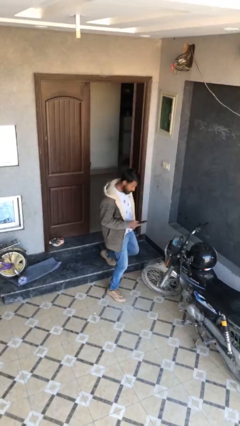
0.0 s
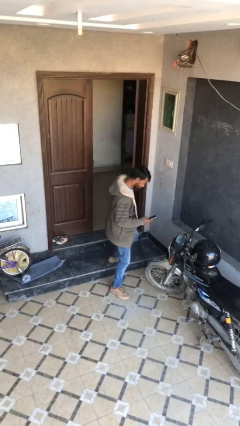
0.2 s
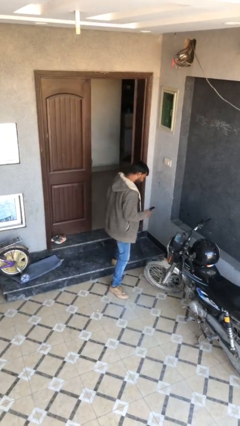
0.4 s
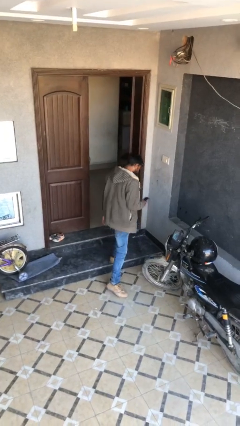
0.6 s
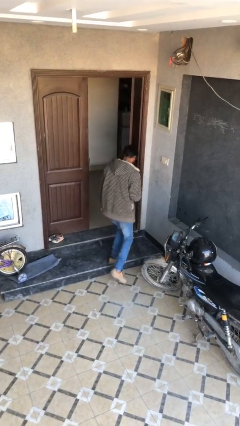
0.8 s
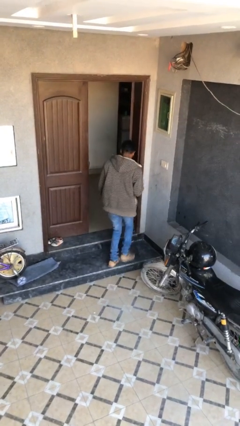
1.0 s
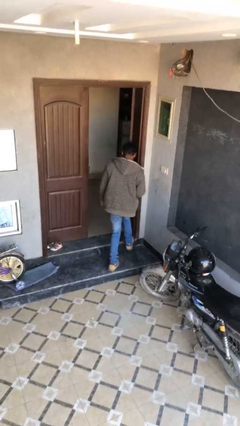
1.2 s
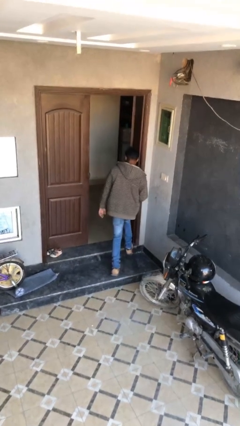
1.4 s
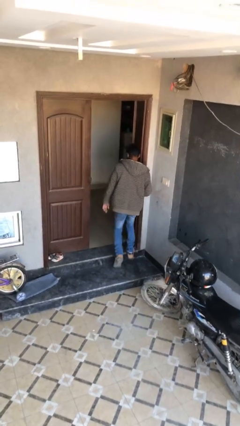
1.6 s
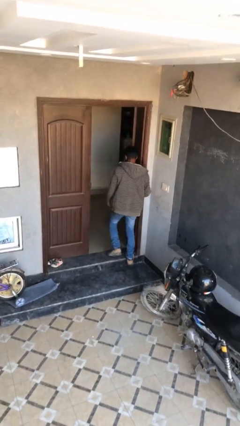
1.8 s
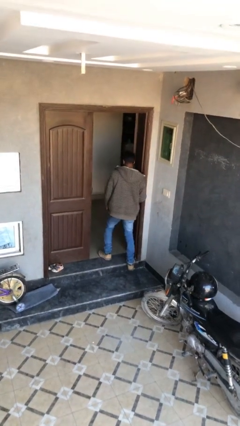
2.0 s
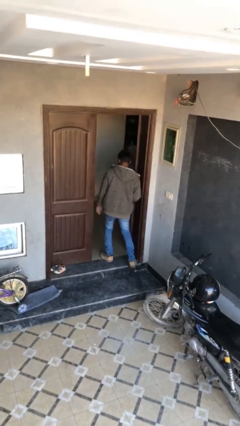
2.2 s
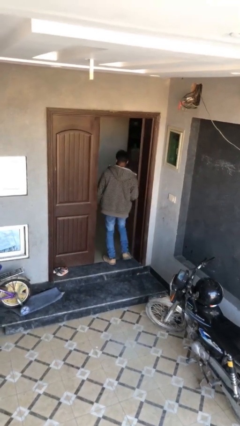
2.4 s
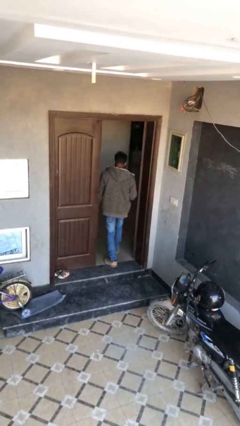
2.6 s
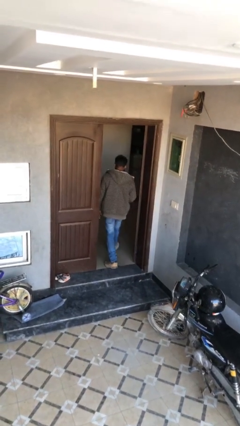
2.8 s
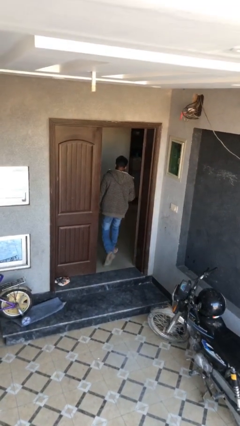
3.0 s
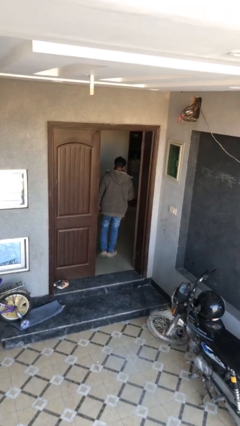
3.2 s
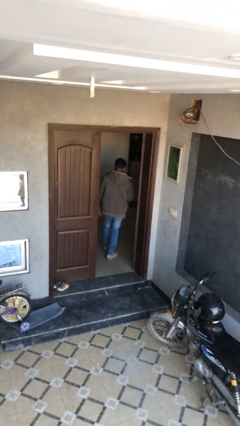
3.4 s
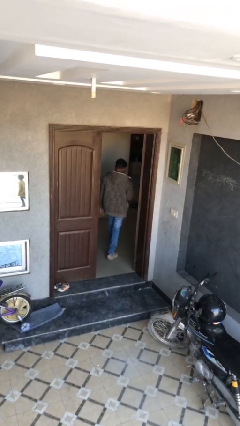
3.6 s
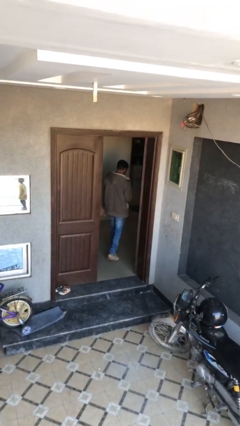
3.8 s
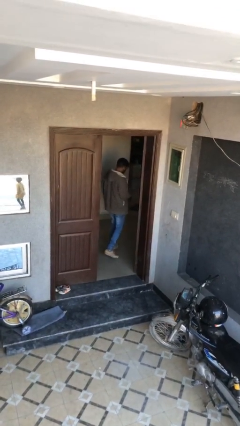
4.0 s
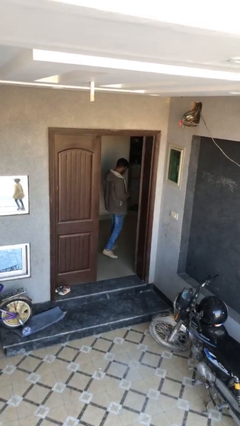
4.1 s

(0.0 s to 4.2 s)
person exits scene through structure

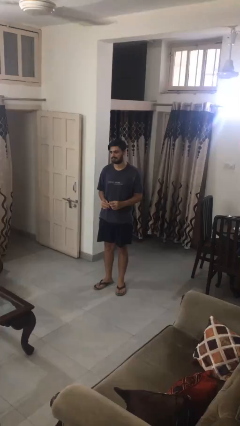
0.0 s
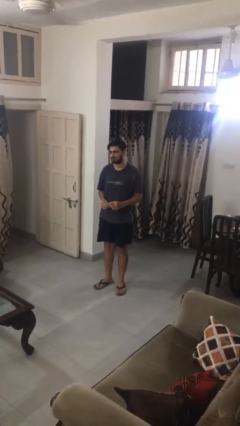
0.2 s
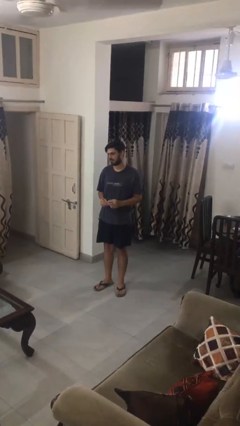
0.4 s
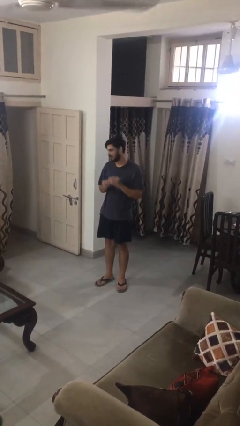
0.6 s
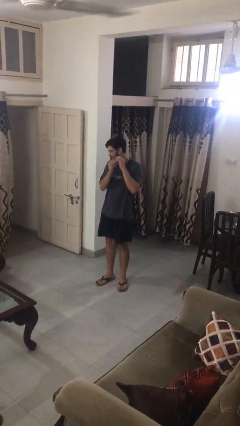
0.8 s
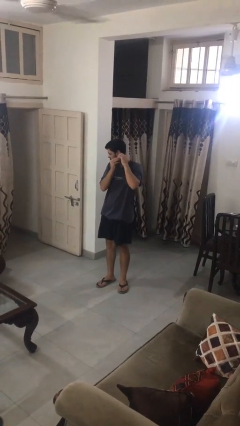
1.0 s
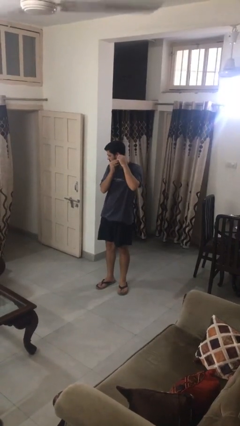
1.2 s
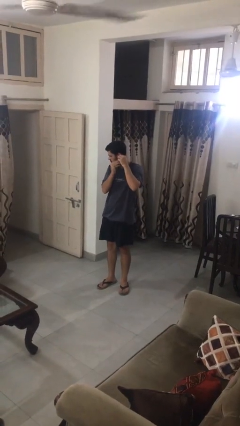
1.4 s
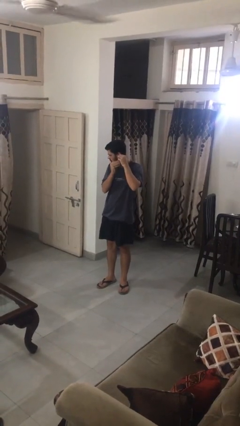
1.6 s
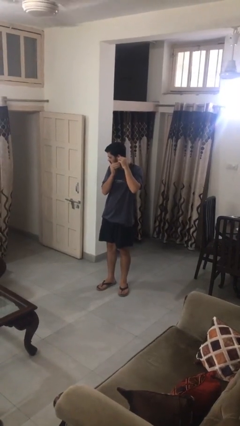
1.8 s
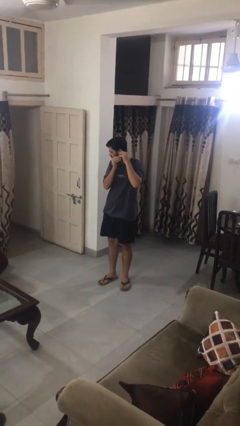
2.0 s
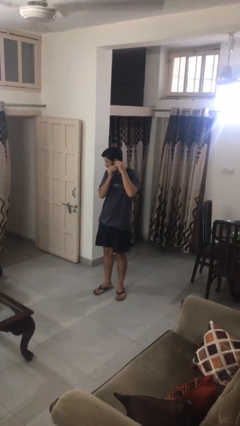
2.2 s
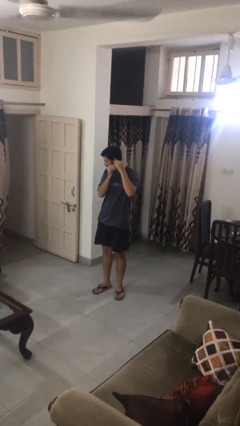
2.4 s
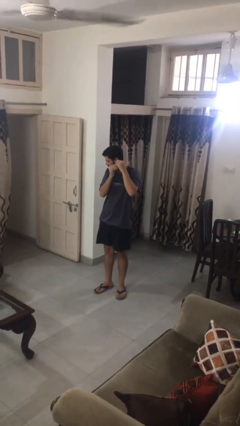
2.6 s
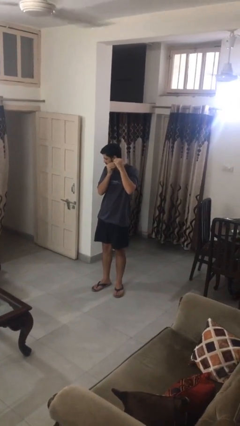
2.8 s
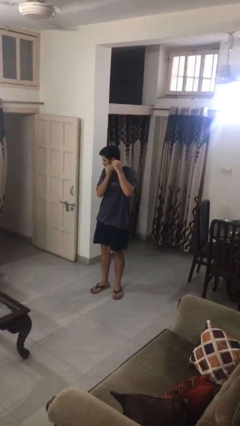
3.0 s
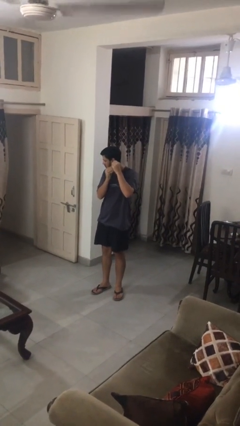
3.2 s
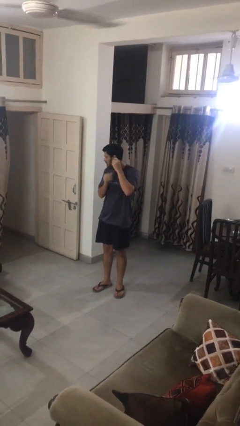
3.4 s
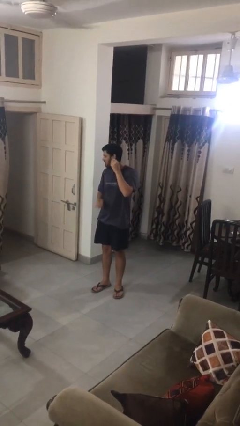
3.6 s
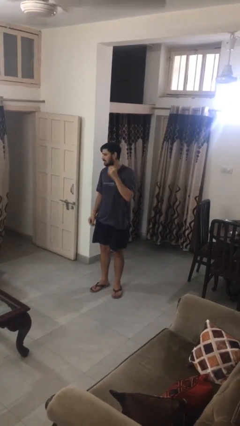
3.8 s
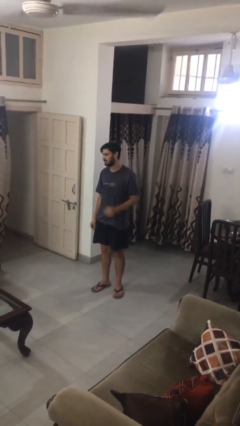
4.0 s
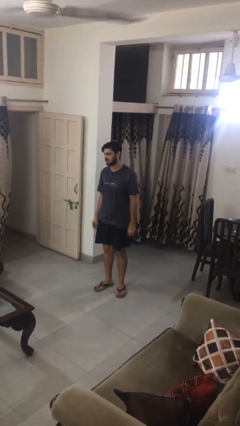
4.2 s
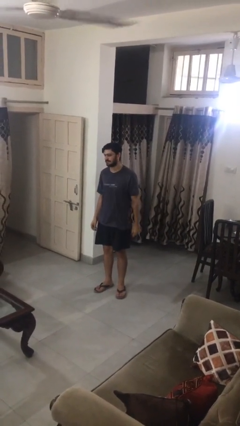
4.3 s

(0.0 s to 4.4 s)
person puts on earrings

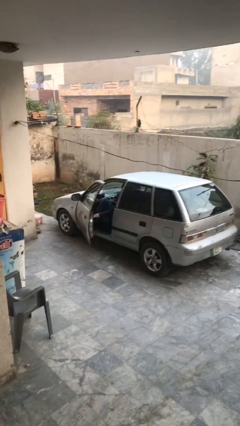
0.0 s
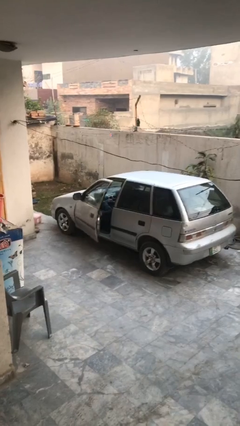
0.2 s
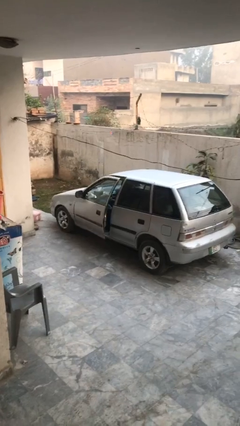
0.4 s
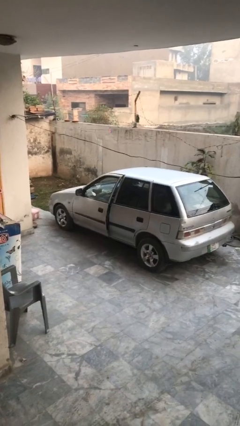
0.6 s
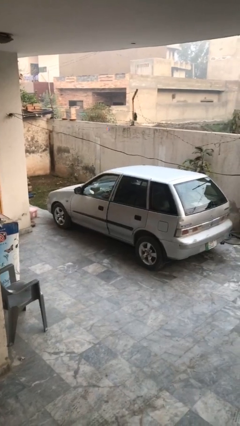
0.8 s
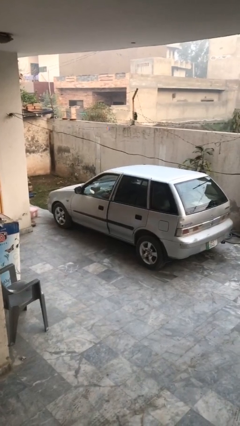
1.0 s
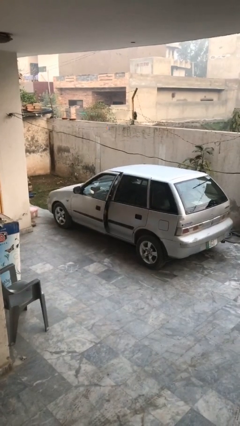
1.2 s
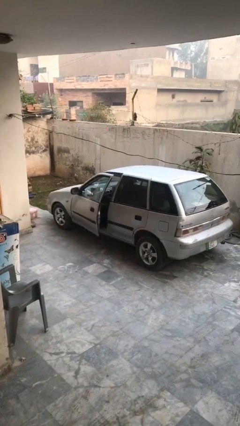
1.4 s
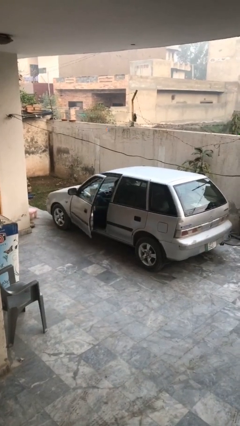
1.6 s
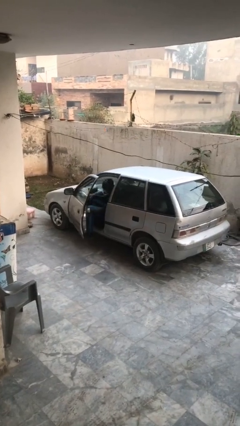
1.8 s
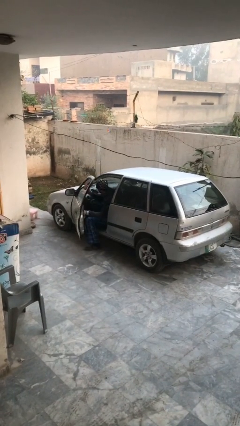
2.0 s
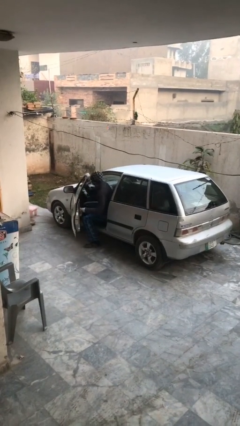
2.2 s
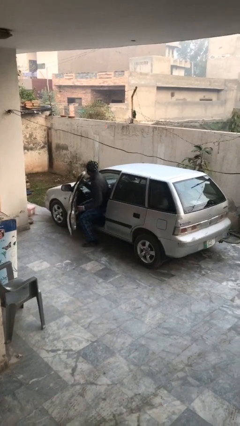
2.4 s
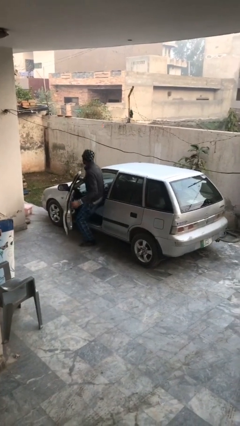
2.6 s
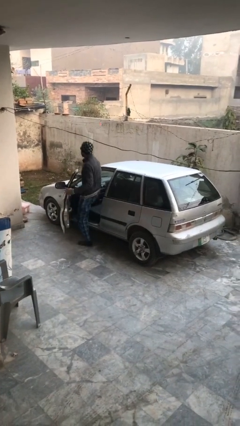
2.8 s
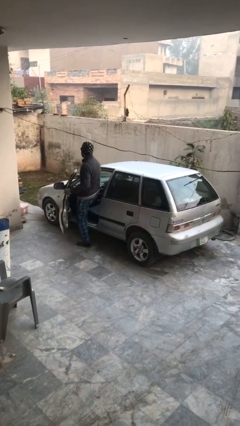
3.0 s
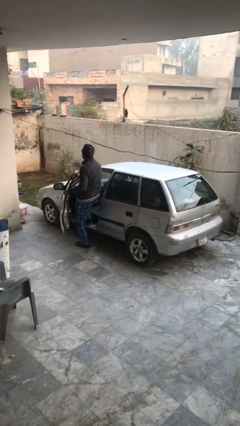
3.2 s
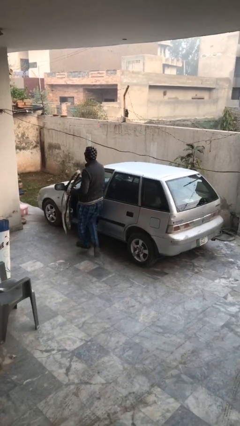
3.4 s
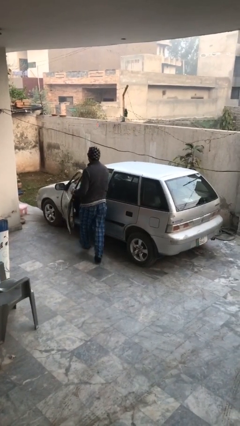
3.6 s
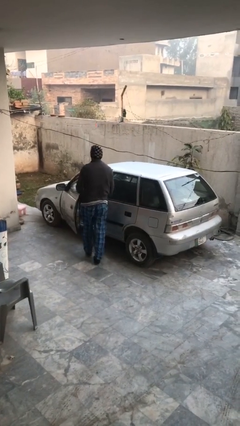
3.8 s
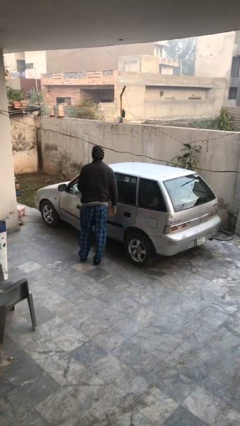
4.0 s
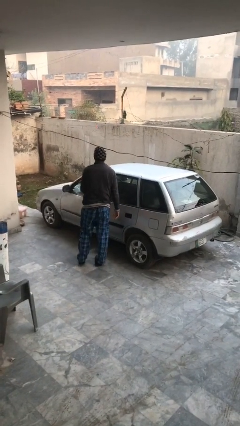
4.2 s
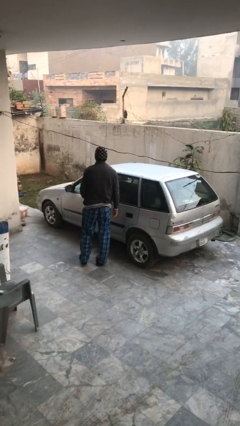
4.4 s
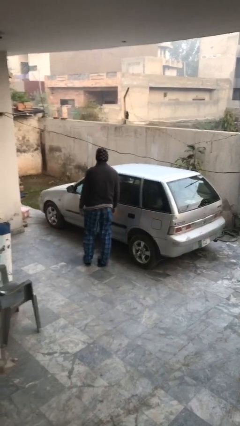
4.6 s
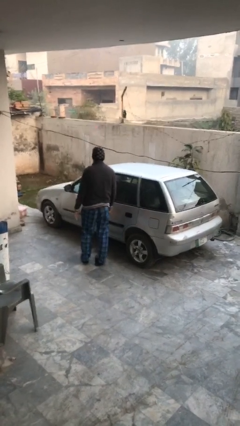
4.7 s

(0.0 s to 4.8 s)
car drops off person

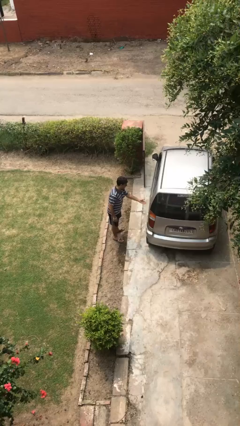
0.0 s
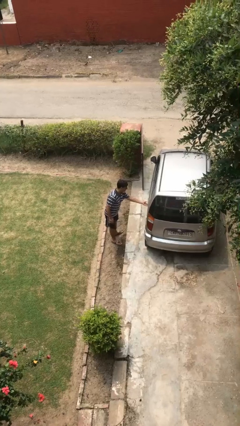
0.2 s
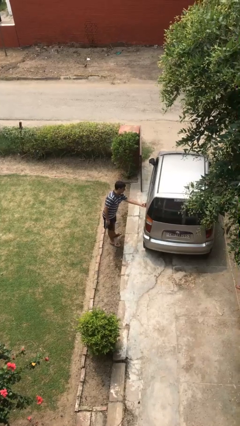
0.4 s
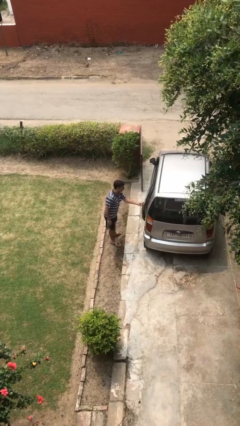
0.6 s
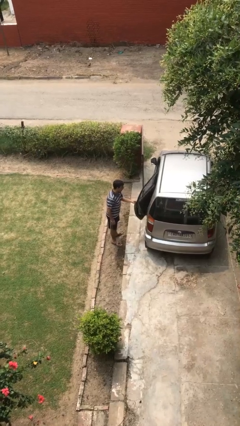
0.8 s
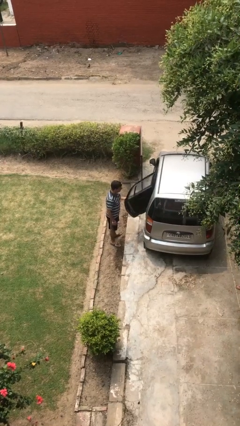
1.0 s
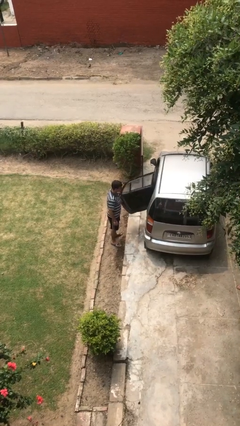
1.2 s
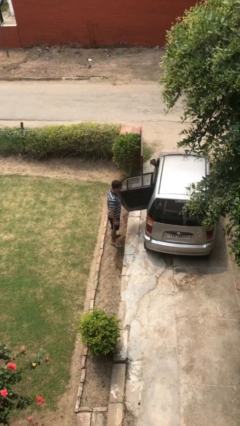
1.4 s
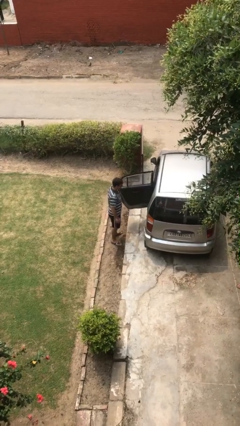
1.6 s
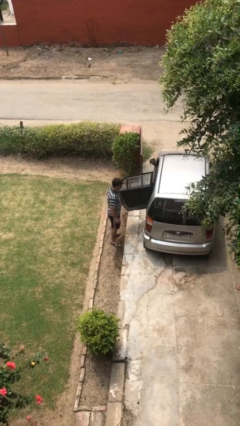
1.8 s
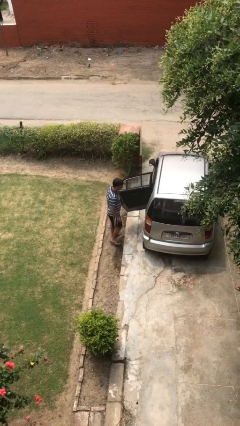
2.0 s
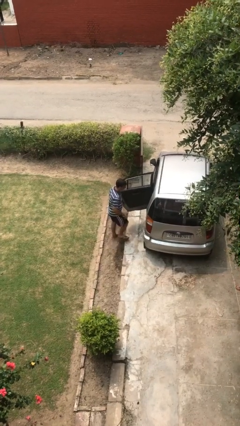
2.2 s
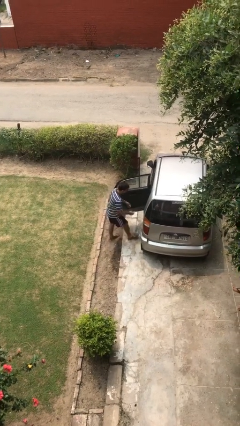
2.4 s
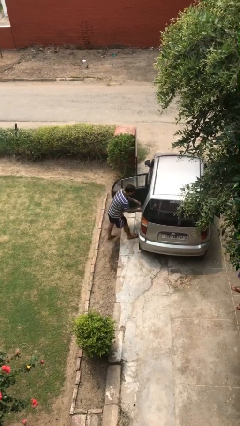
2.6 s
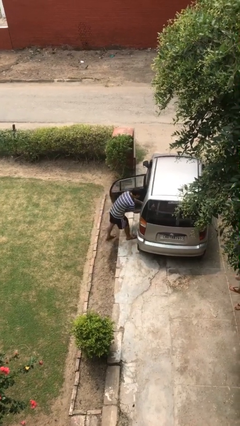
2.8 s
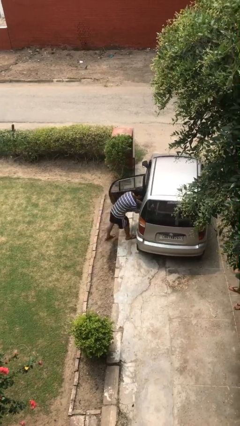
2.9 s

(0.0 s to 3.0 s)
person opens car door

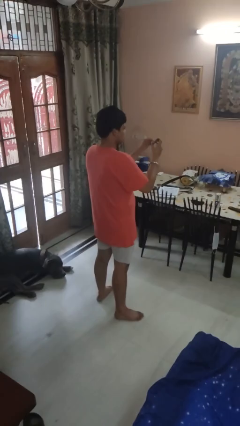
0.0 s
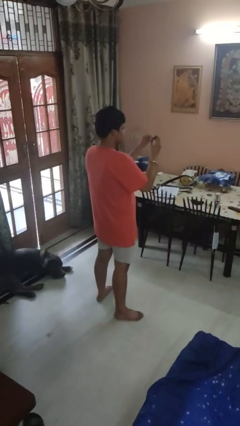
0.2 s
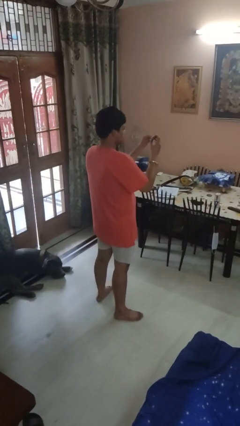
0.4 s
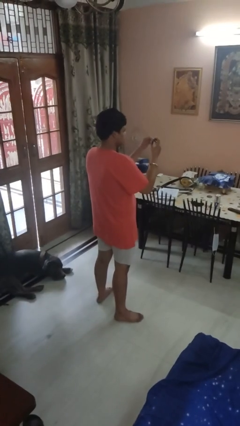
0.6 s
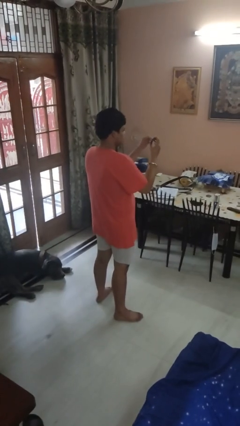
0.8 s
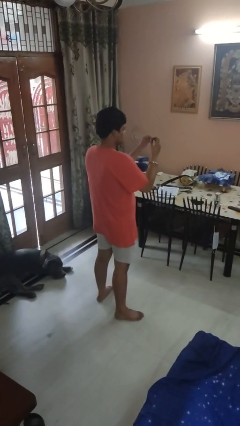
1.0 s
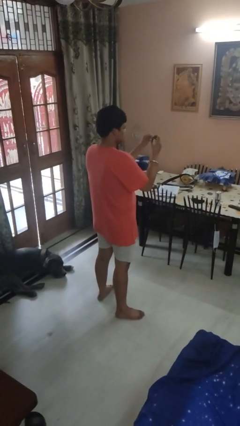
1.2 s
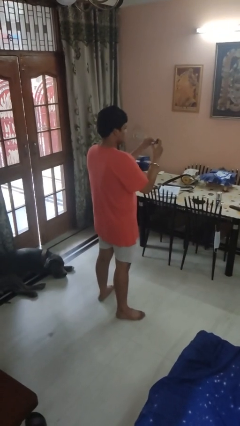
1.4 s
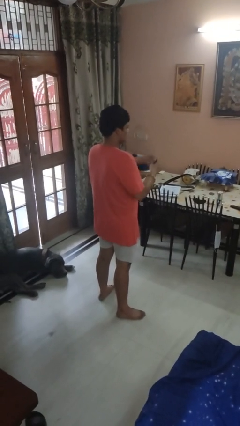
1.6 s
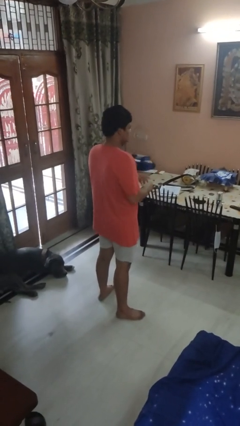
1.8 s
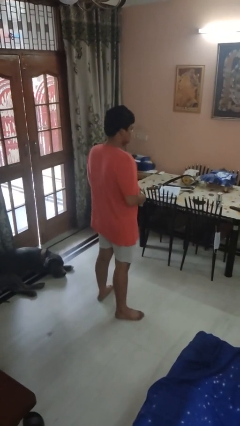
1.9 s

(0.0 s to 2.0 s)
person clips fingernails
